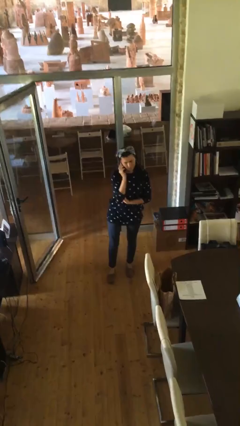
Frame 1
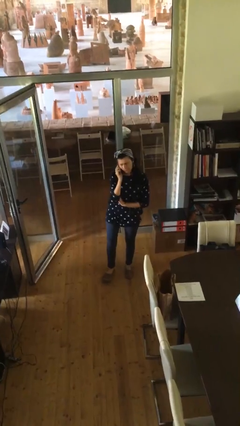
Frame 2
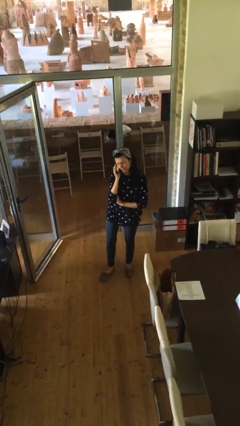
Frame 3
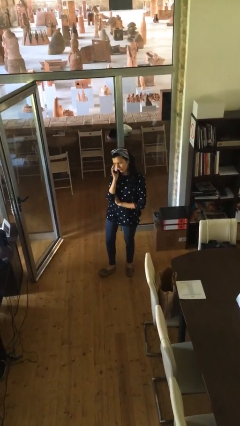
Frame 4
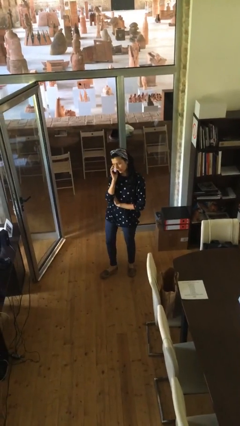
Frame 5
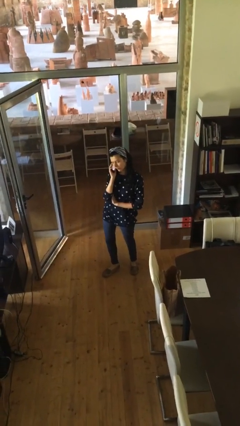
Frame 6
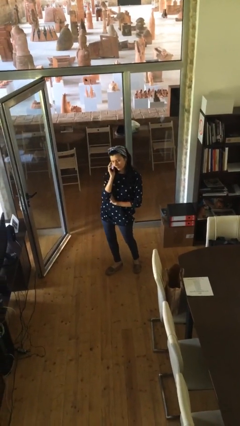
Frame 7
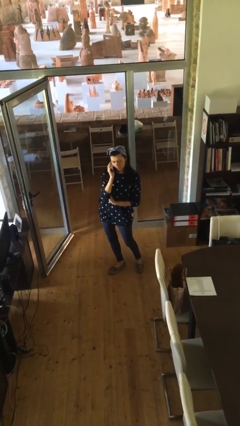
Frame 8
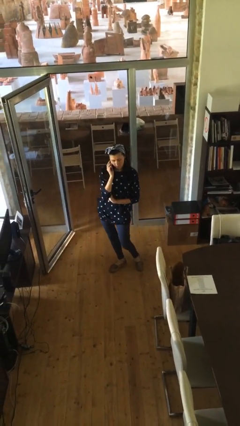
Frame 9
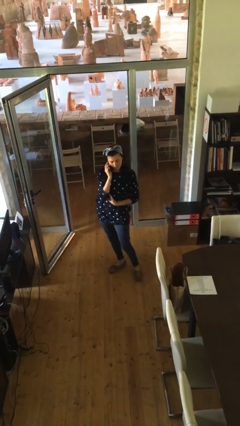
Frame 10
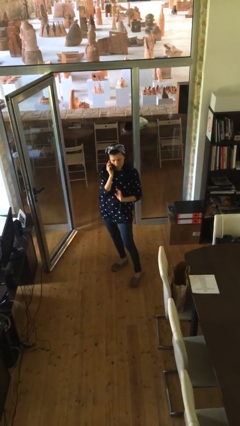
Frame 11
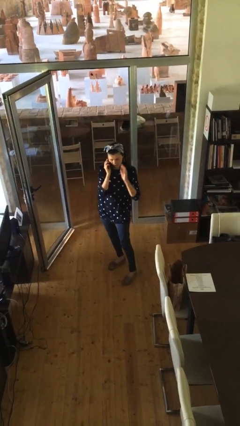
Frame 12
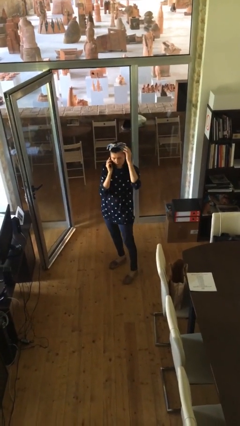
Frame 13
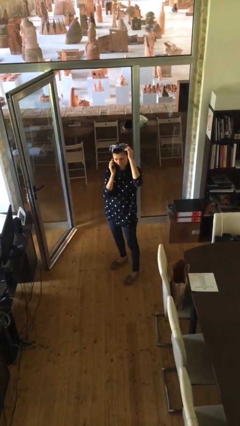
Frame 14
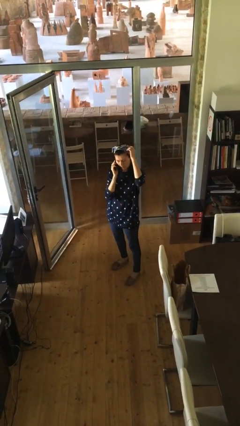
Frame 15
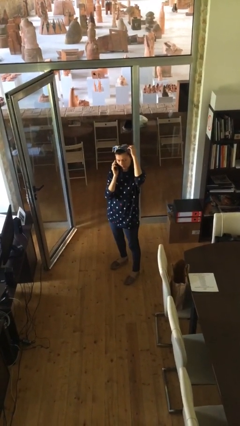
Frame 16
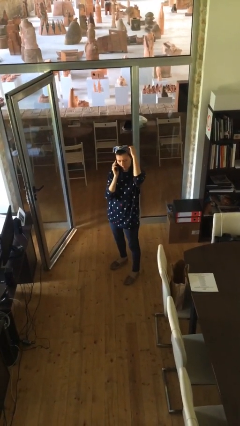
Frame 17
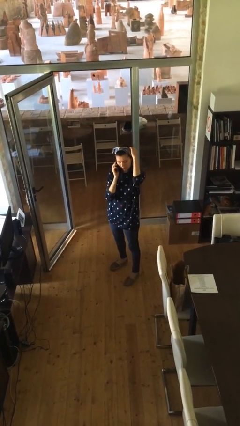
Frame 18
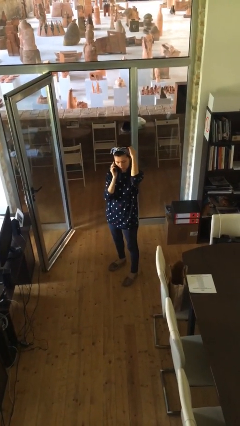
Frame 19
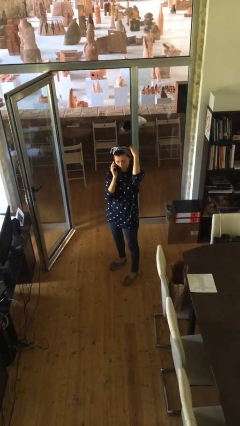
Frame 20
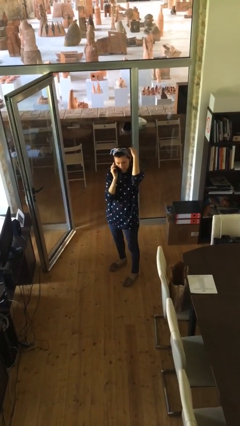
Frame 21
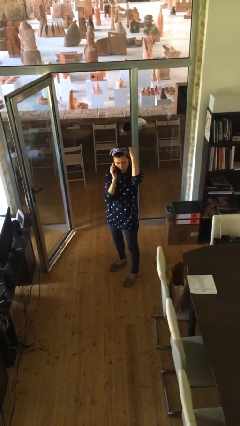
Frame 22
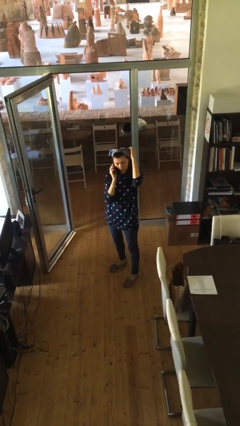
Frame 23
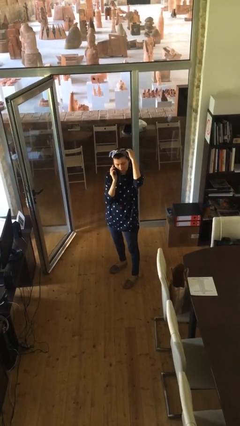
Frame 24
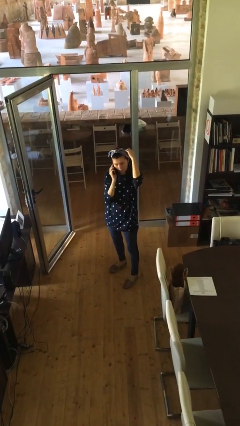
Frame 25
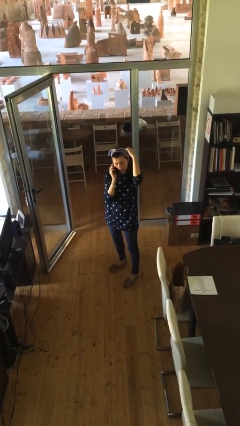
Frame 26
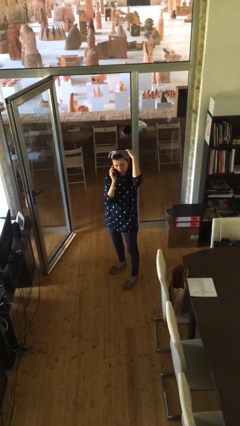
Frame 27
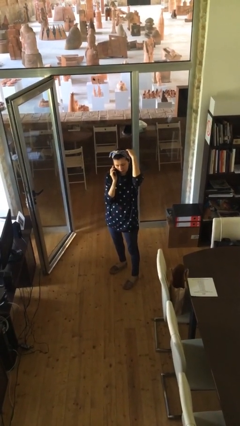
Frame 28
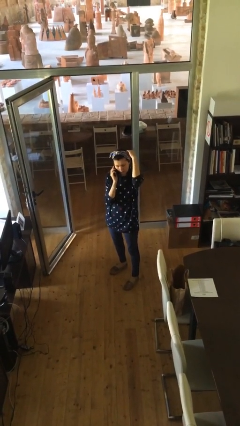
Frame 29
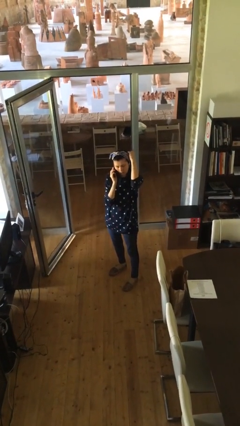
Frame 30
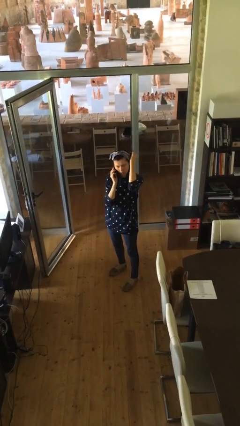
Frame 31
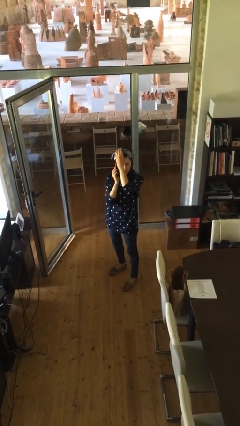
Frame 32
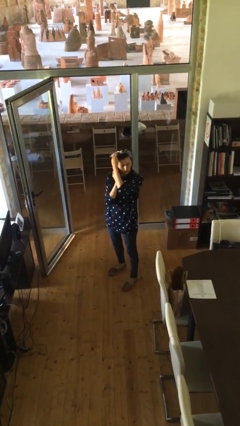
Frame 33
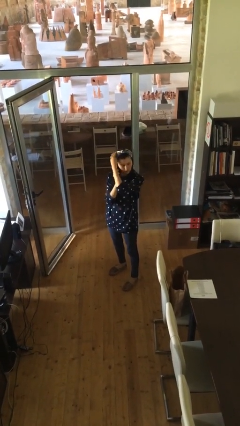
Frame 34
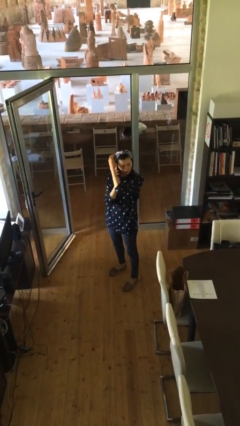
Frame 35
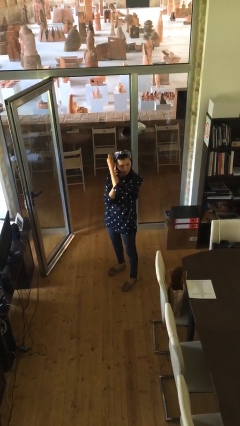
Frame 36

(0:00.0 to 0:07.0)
person talks on phone

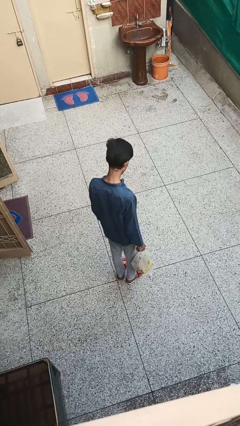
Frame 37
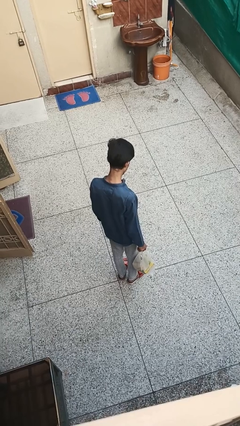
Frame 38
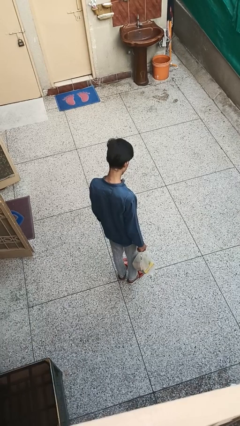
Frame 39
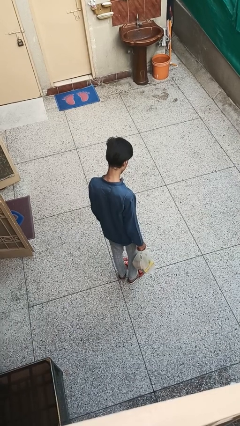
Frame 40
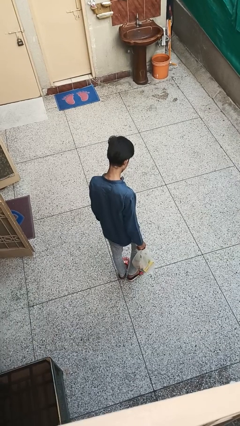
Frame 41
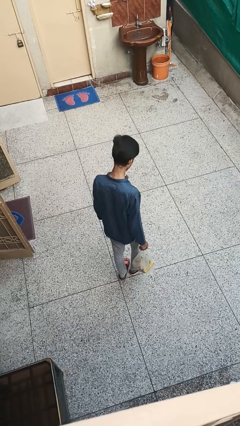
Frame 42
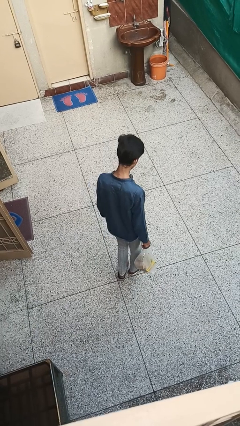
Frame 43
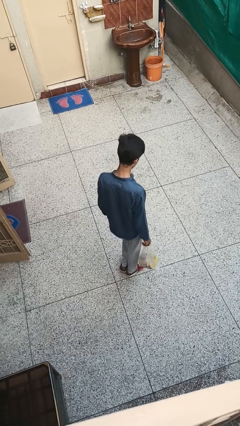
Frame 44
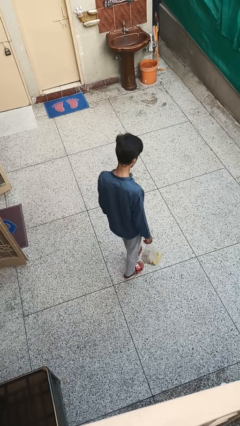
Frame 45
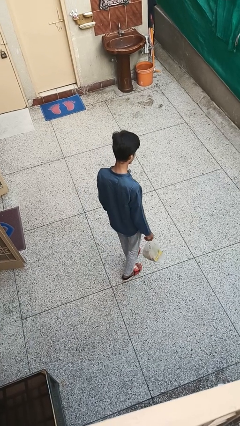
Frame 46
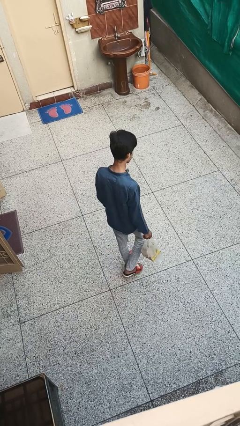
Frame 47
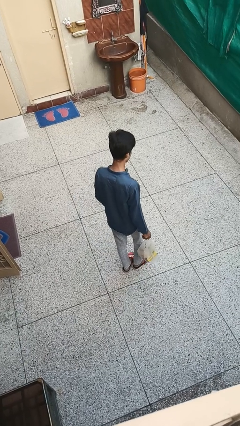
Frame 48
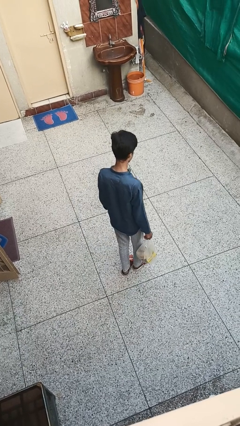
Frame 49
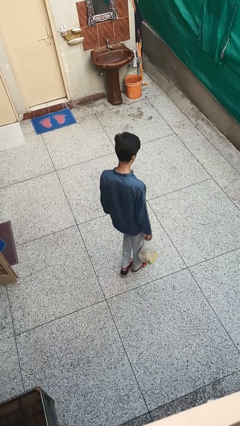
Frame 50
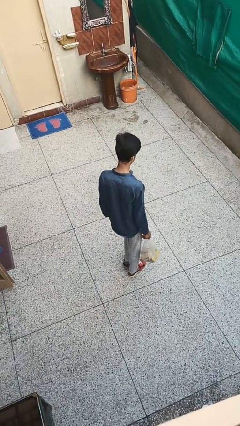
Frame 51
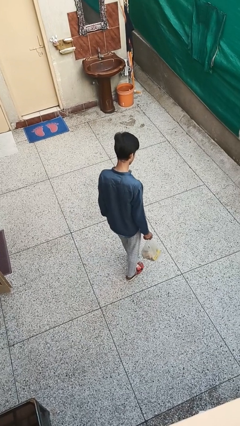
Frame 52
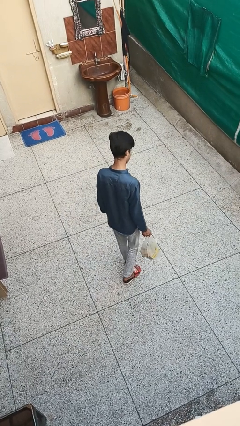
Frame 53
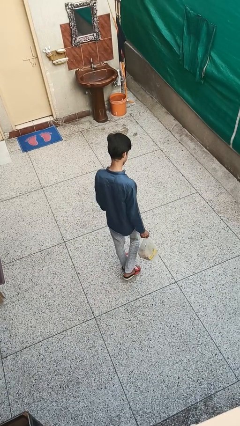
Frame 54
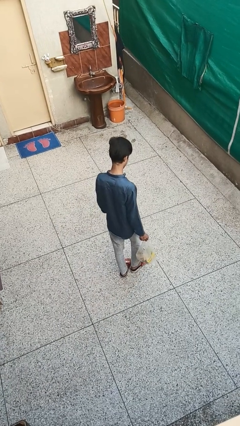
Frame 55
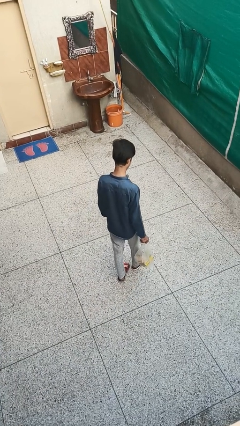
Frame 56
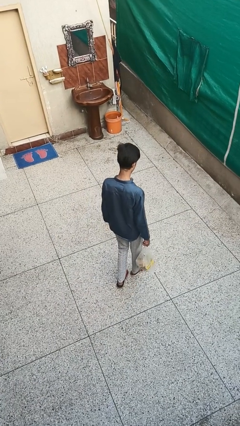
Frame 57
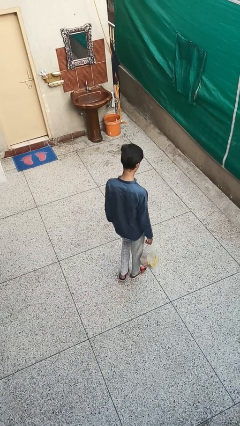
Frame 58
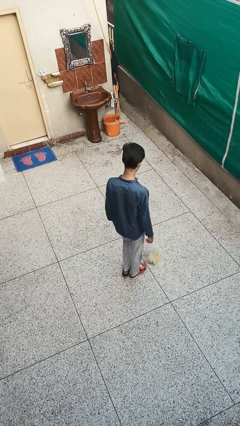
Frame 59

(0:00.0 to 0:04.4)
person carries groceries

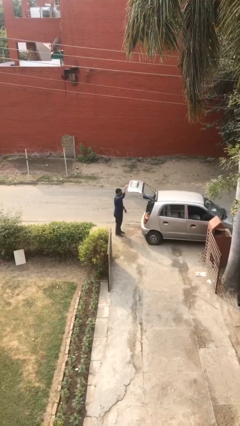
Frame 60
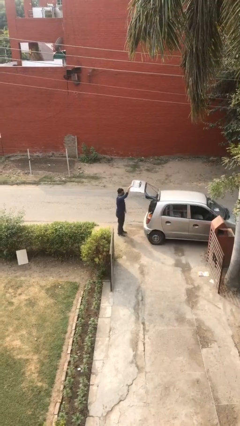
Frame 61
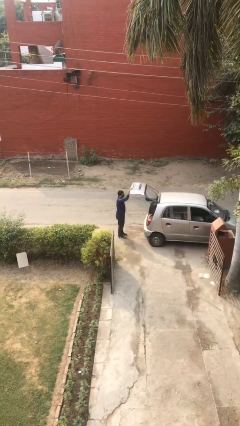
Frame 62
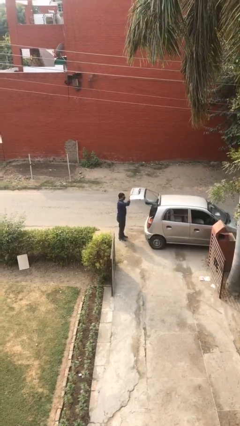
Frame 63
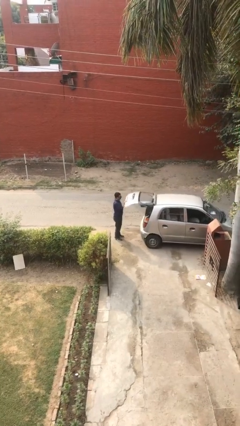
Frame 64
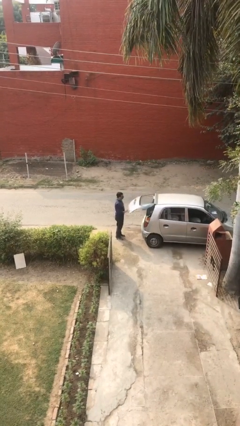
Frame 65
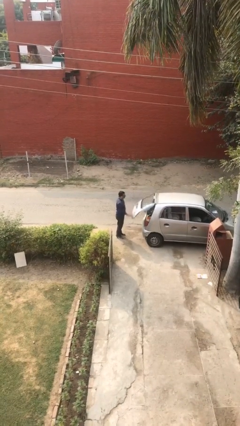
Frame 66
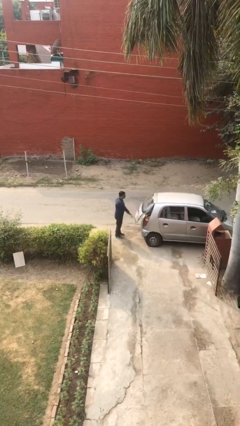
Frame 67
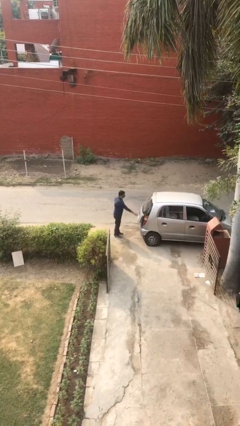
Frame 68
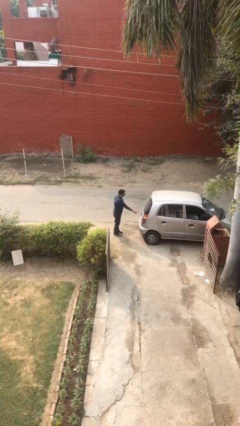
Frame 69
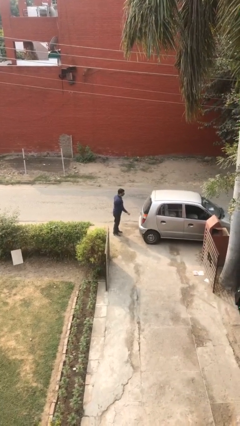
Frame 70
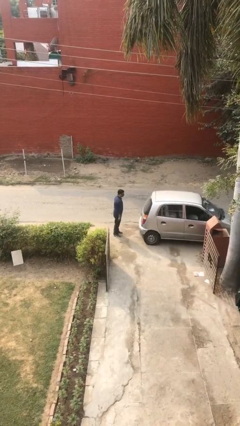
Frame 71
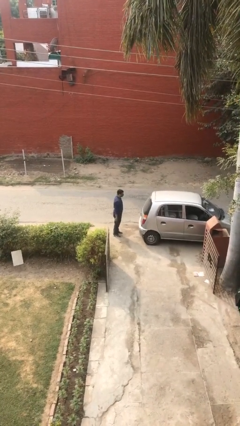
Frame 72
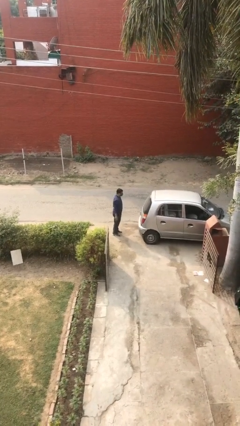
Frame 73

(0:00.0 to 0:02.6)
person closes car trunk

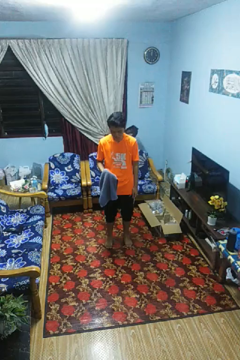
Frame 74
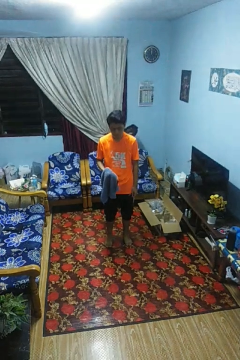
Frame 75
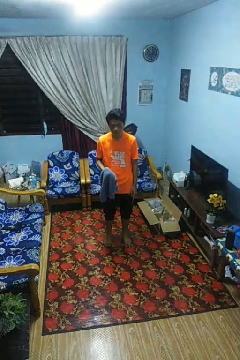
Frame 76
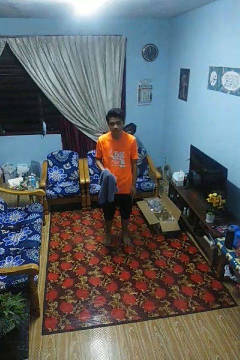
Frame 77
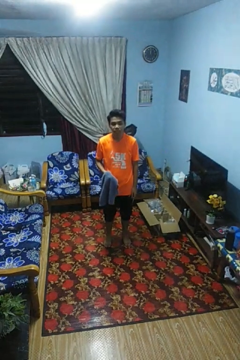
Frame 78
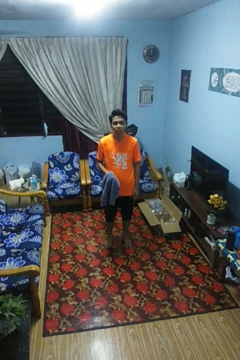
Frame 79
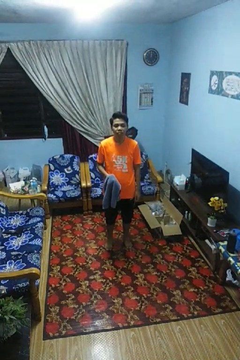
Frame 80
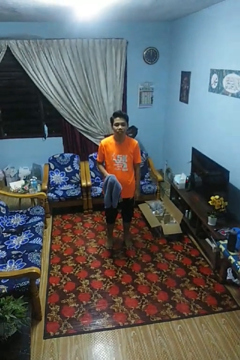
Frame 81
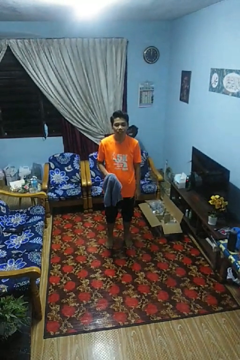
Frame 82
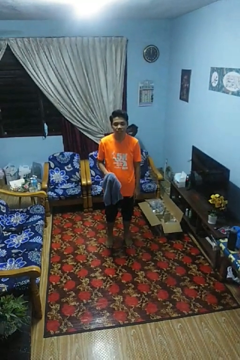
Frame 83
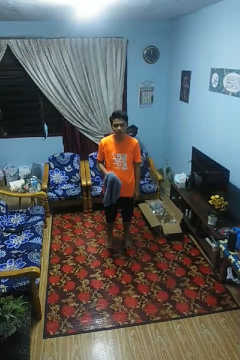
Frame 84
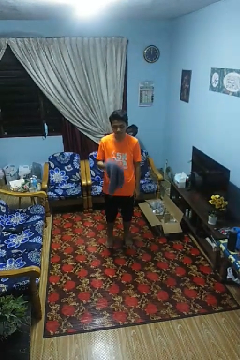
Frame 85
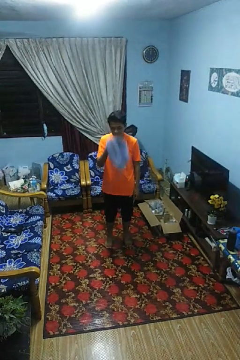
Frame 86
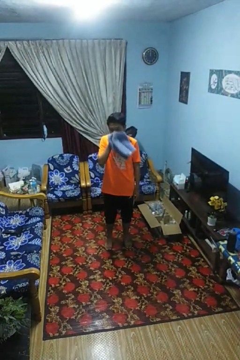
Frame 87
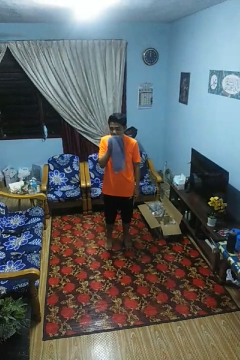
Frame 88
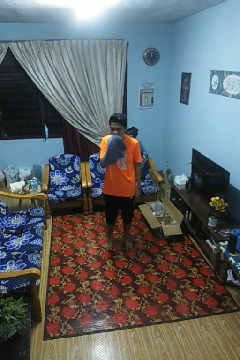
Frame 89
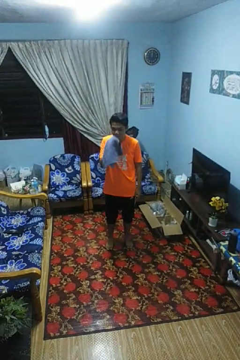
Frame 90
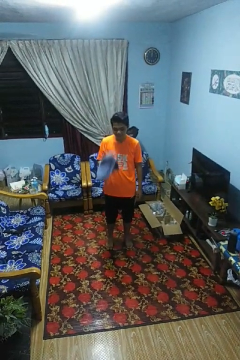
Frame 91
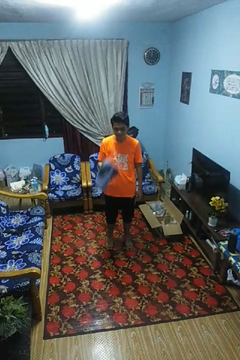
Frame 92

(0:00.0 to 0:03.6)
person wipes mouth with napkin

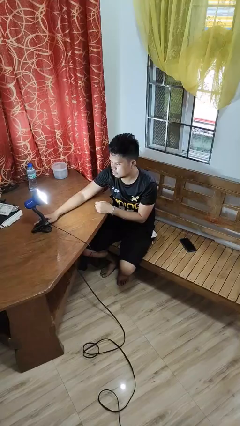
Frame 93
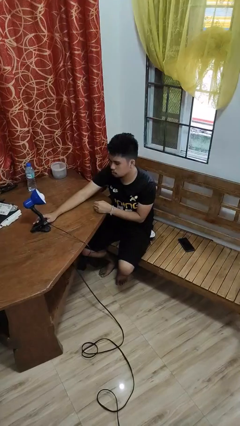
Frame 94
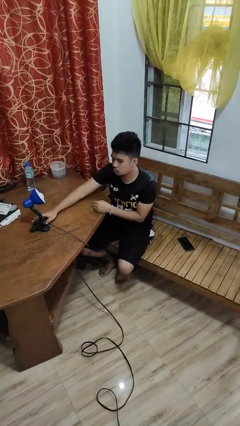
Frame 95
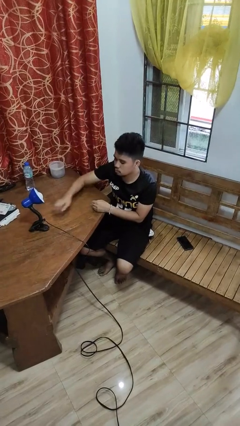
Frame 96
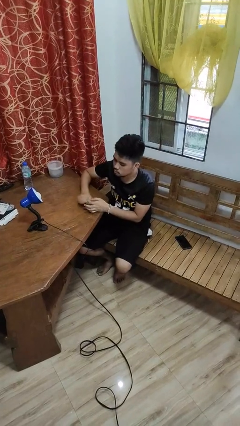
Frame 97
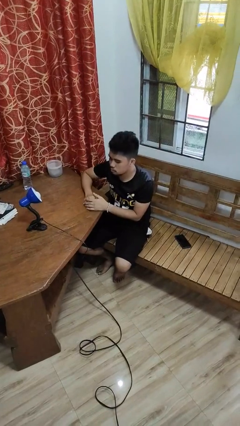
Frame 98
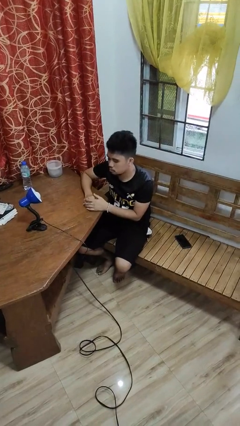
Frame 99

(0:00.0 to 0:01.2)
person turns off lamp
